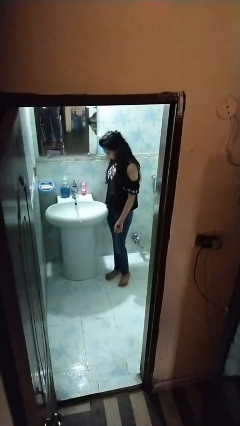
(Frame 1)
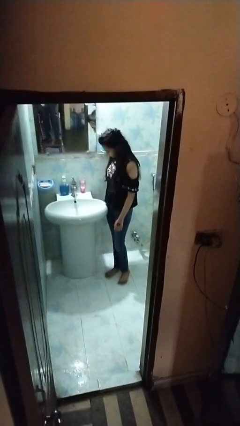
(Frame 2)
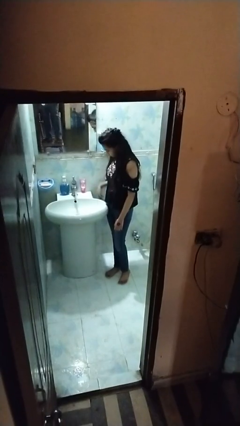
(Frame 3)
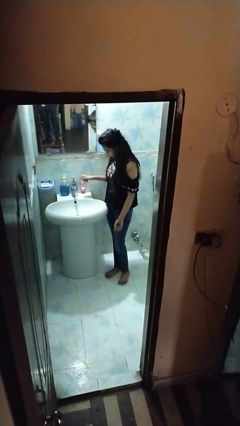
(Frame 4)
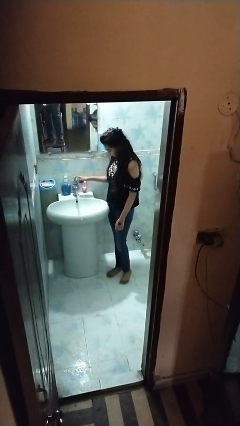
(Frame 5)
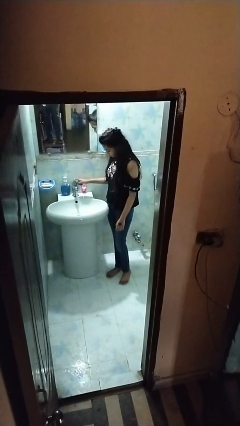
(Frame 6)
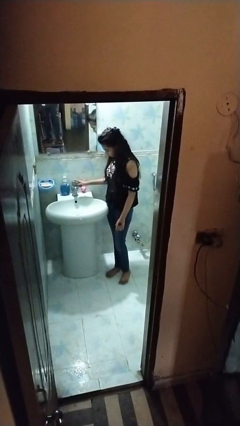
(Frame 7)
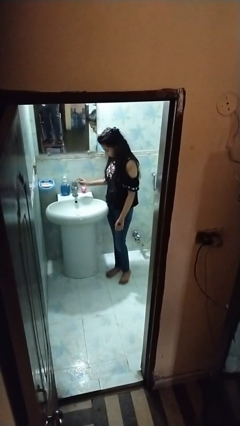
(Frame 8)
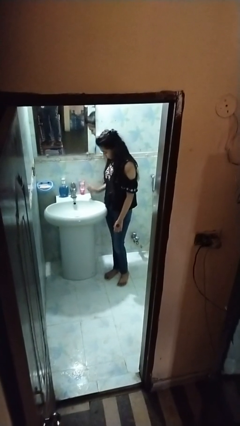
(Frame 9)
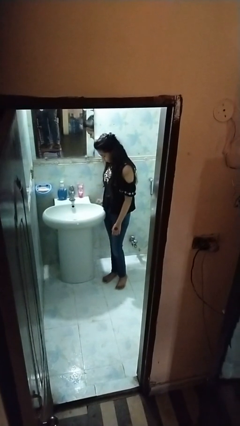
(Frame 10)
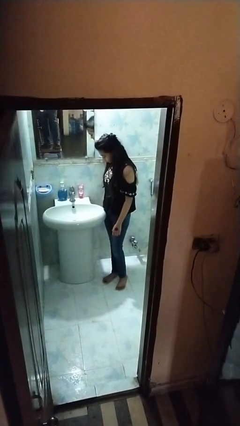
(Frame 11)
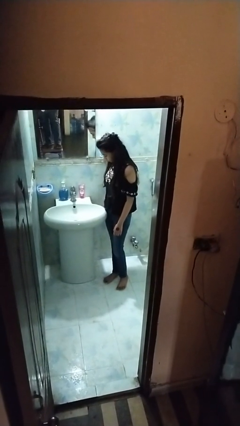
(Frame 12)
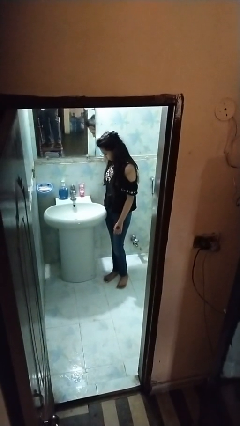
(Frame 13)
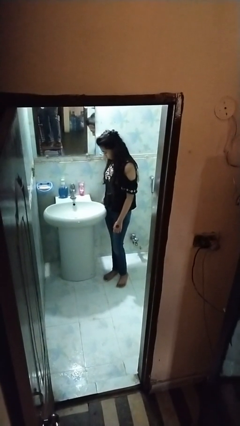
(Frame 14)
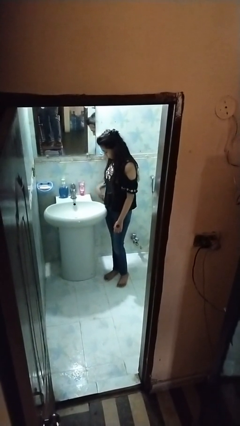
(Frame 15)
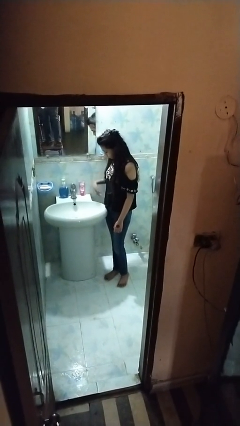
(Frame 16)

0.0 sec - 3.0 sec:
person turns off faucet

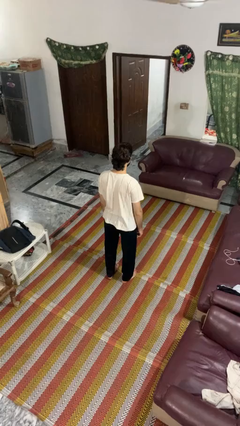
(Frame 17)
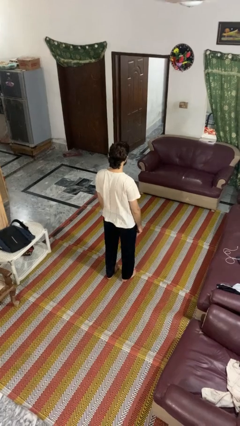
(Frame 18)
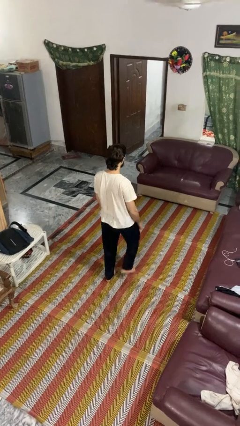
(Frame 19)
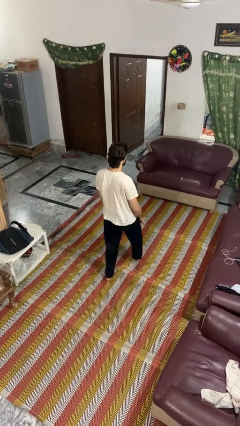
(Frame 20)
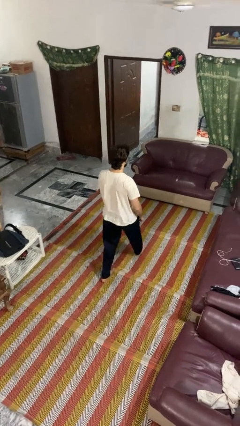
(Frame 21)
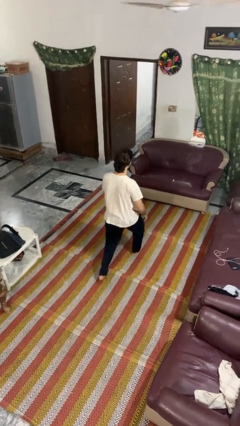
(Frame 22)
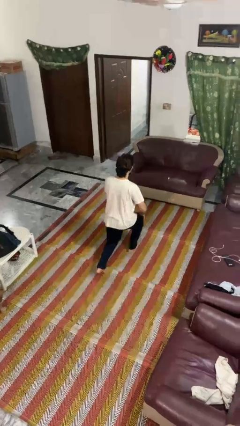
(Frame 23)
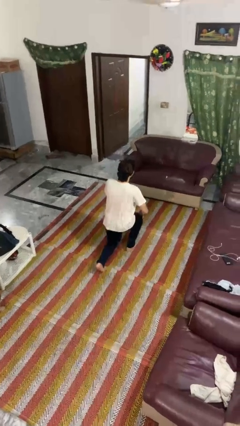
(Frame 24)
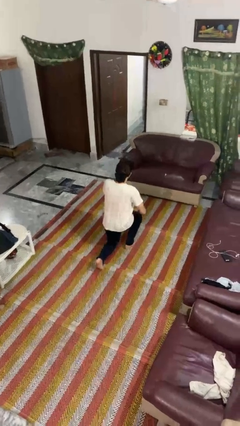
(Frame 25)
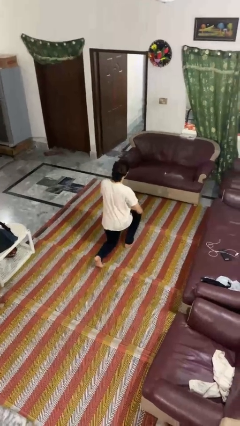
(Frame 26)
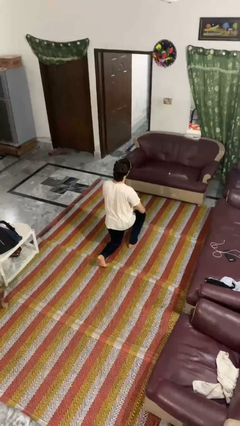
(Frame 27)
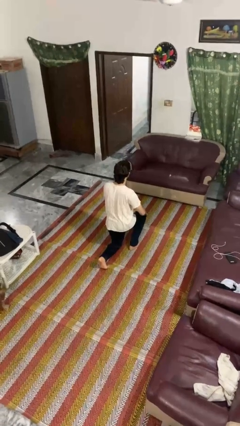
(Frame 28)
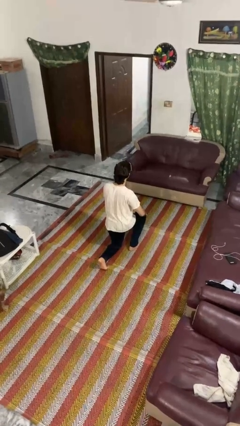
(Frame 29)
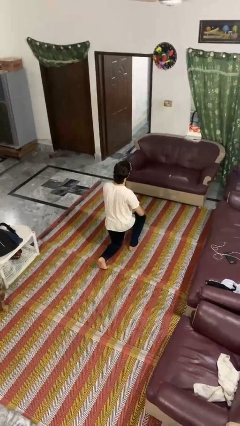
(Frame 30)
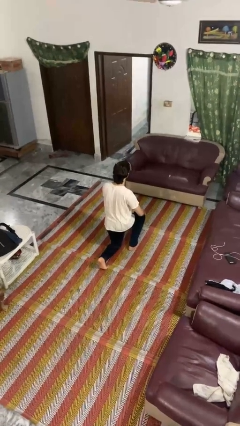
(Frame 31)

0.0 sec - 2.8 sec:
person kneels

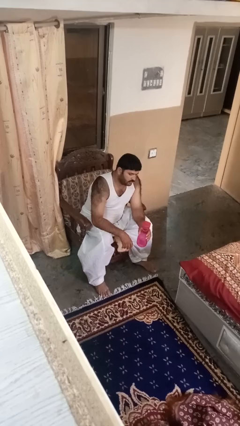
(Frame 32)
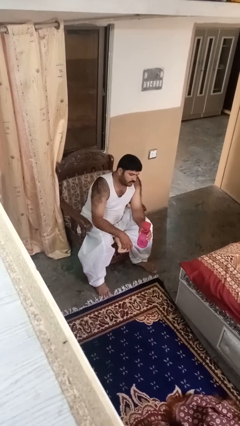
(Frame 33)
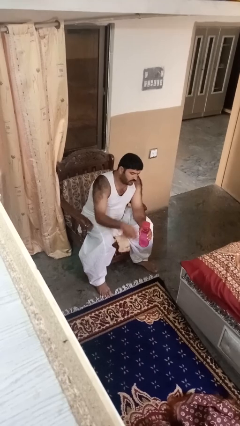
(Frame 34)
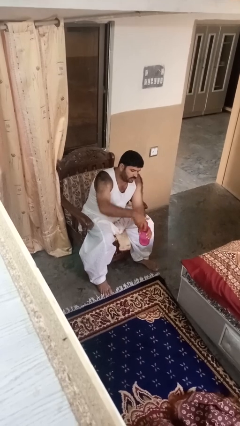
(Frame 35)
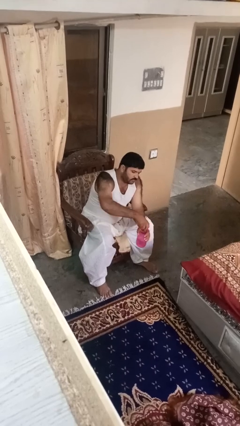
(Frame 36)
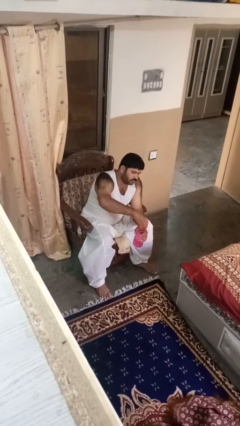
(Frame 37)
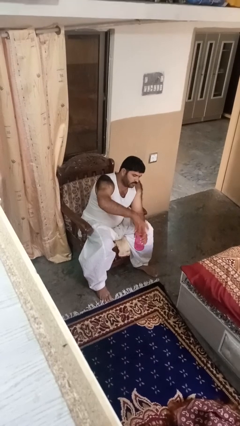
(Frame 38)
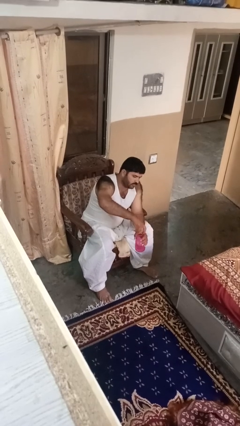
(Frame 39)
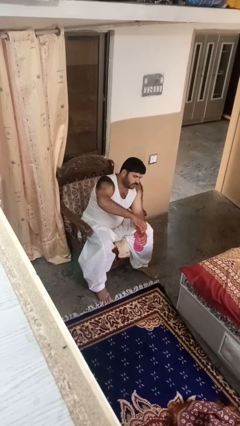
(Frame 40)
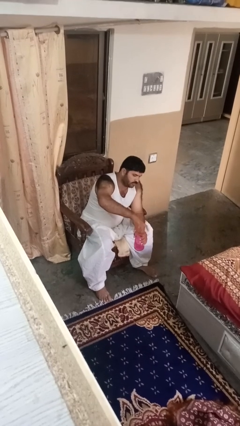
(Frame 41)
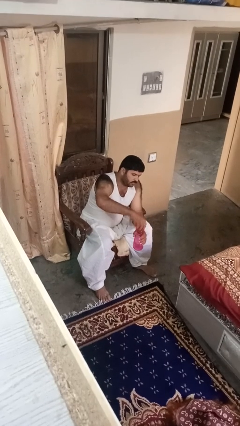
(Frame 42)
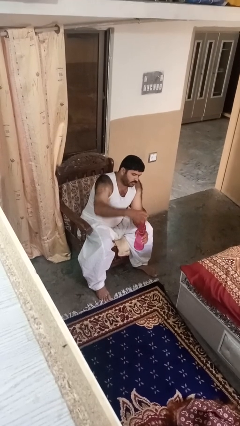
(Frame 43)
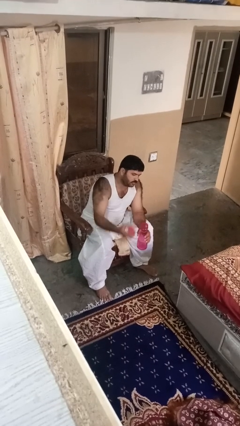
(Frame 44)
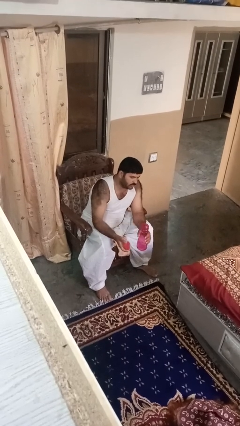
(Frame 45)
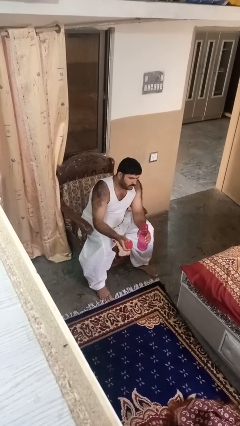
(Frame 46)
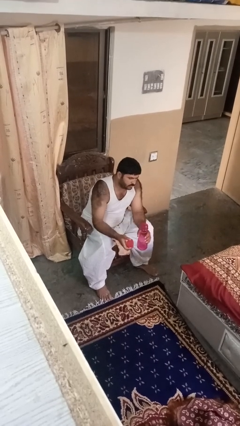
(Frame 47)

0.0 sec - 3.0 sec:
person unscrews lid from bottle

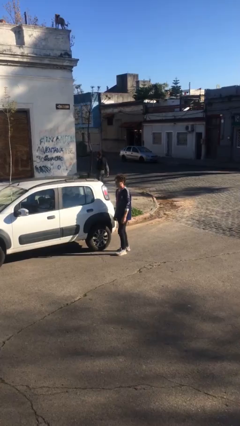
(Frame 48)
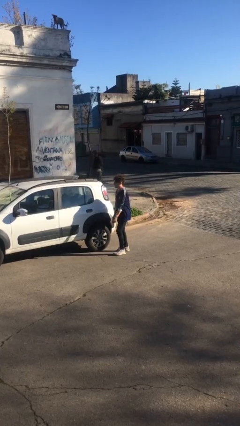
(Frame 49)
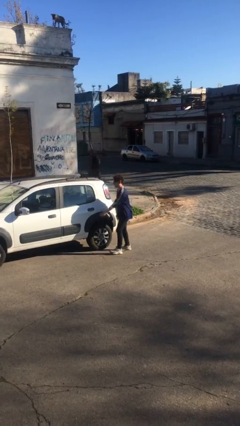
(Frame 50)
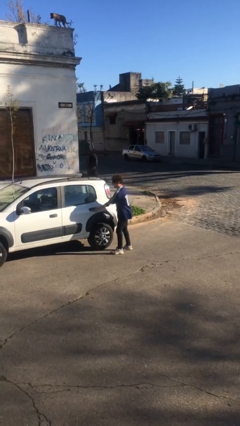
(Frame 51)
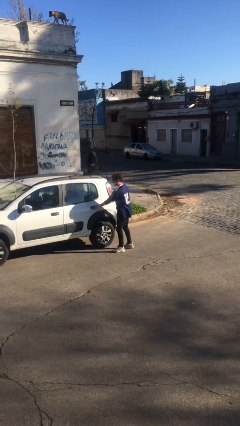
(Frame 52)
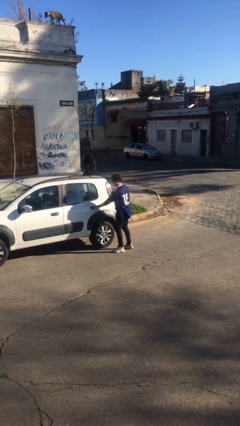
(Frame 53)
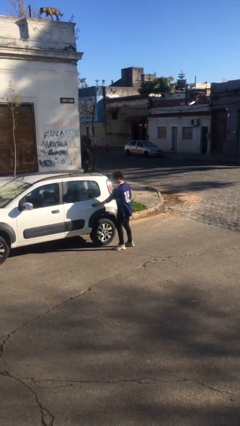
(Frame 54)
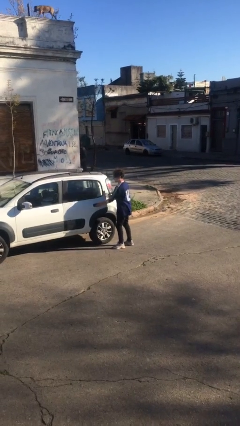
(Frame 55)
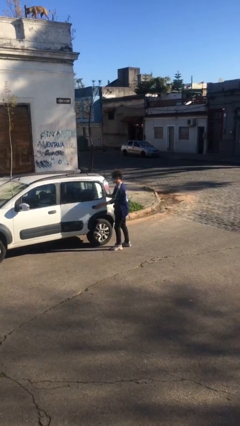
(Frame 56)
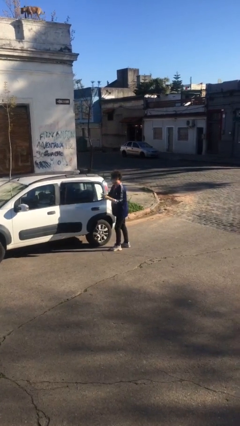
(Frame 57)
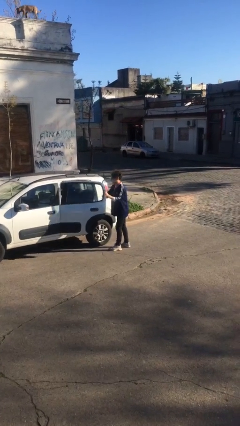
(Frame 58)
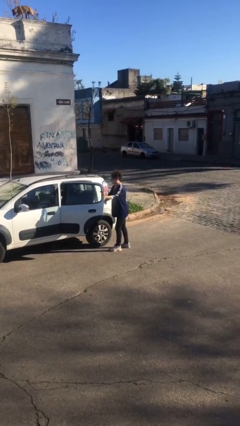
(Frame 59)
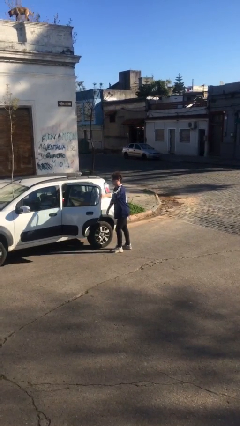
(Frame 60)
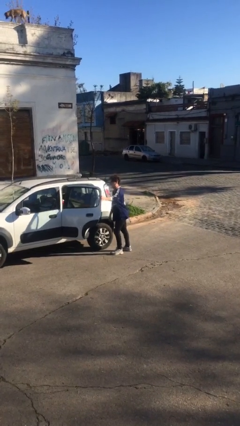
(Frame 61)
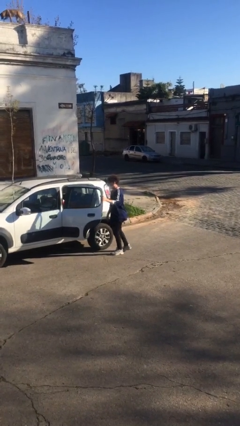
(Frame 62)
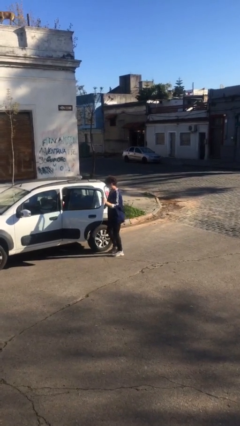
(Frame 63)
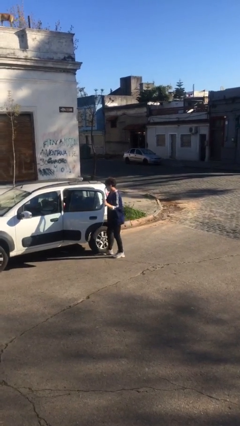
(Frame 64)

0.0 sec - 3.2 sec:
person opens car door

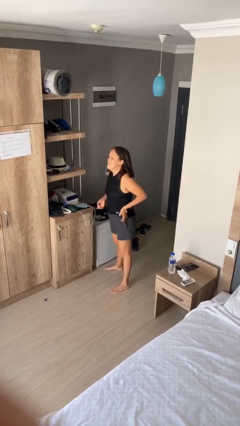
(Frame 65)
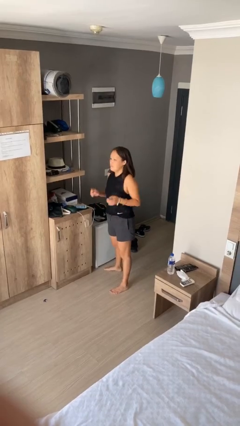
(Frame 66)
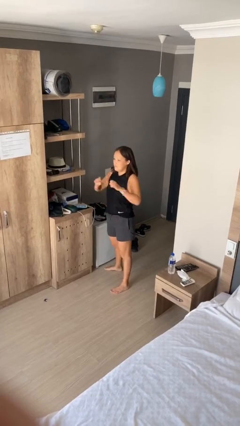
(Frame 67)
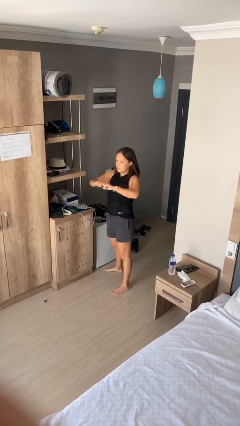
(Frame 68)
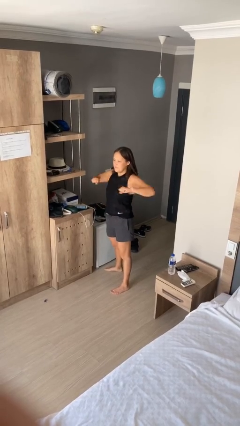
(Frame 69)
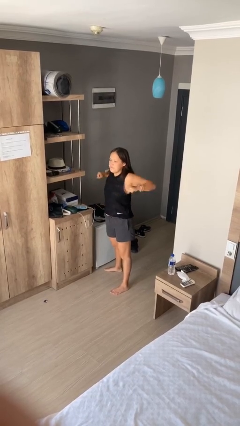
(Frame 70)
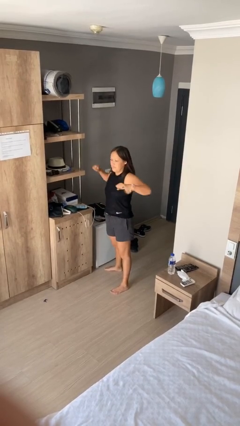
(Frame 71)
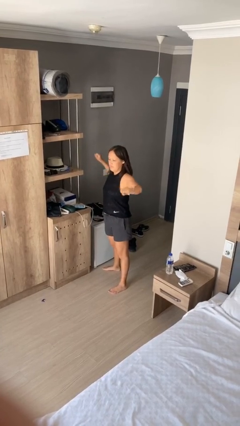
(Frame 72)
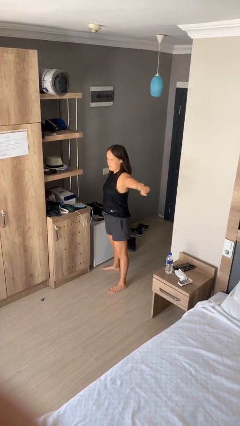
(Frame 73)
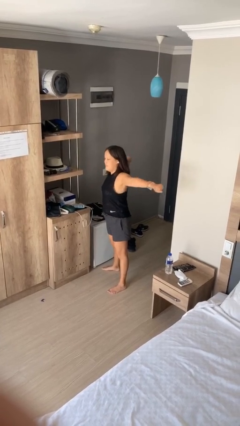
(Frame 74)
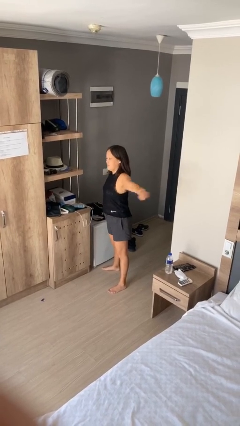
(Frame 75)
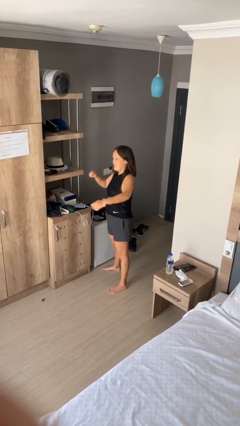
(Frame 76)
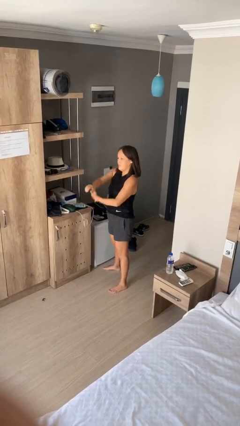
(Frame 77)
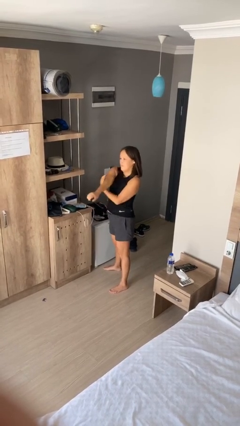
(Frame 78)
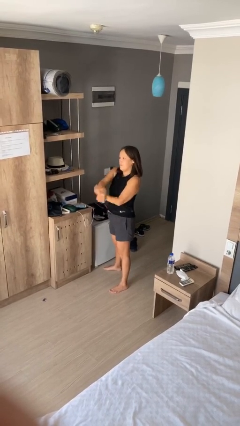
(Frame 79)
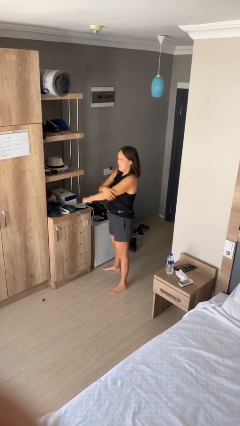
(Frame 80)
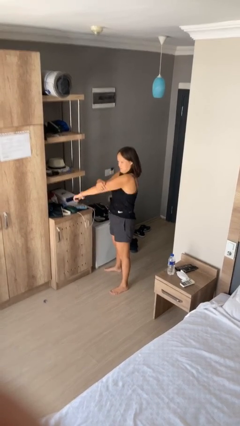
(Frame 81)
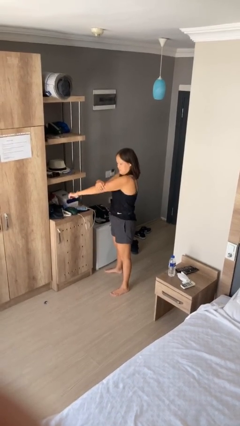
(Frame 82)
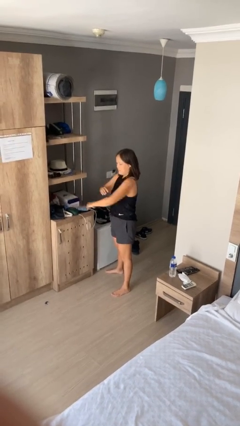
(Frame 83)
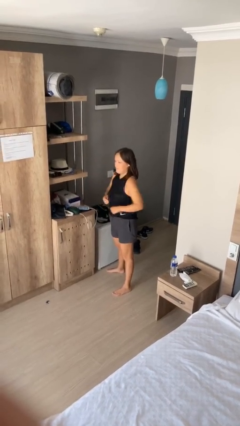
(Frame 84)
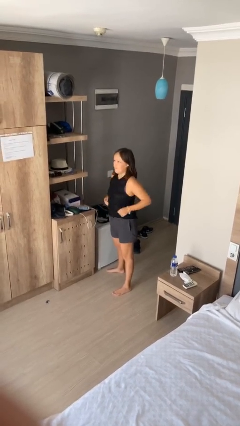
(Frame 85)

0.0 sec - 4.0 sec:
person stretches arms to side

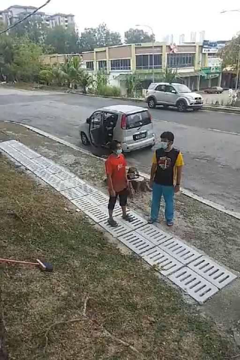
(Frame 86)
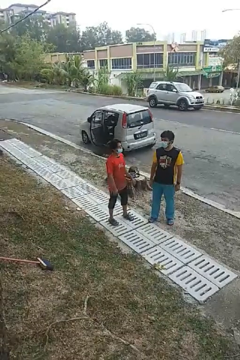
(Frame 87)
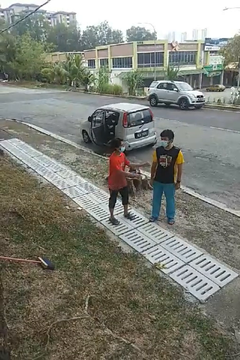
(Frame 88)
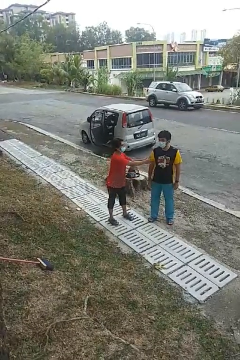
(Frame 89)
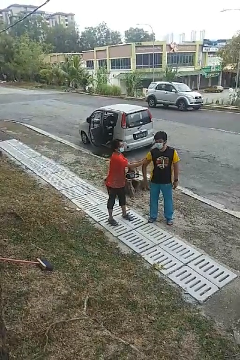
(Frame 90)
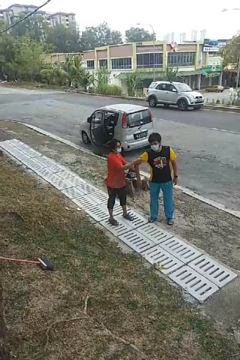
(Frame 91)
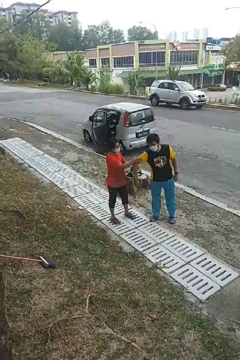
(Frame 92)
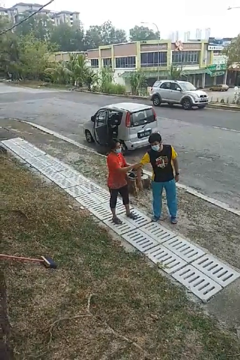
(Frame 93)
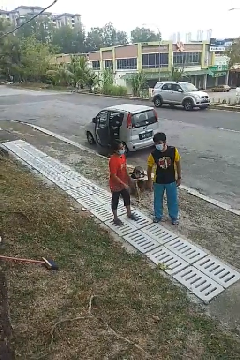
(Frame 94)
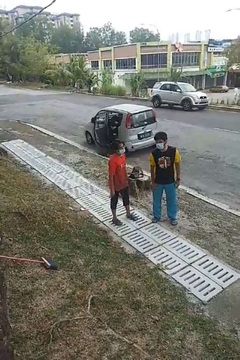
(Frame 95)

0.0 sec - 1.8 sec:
person grabs person by bicep
